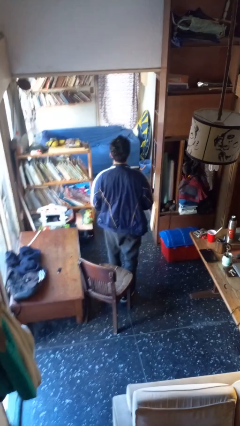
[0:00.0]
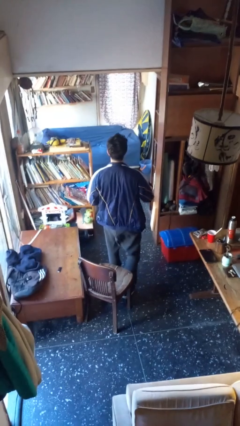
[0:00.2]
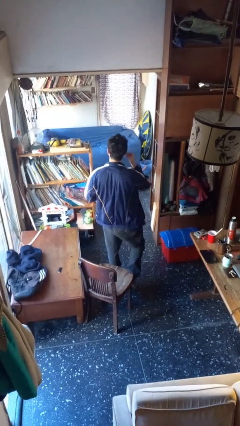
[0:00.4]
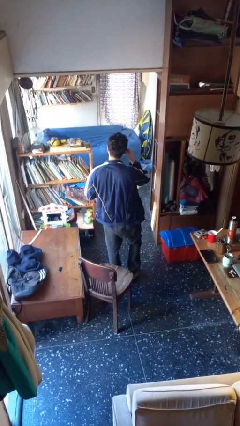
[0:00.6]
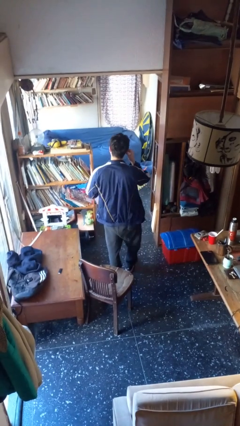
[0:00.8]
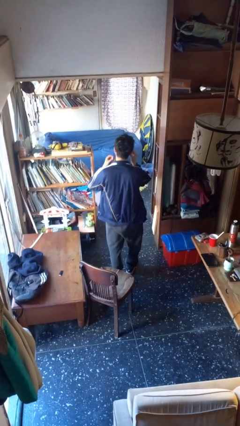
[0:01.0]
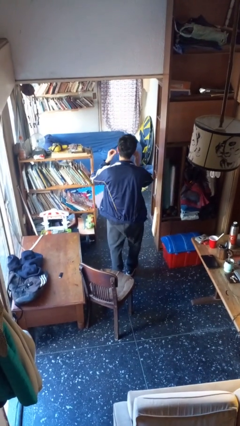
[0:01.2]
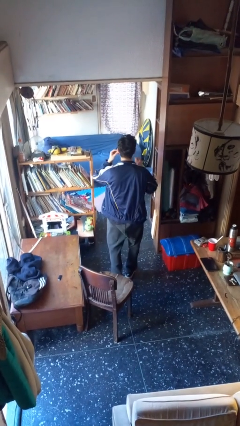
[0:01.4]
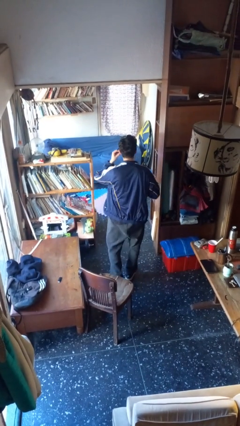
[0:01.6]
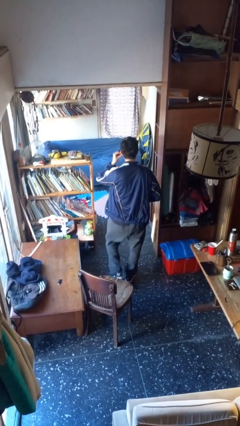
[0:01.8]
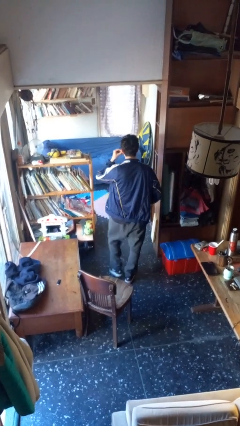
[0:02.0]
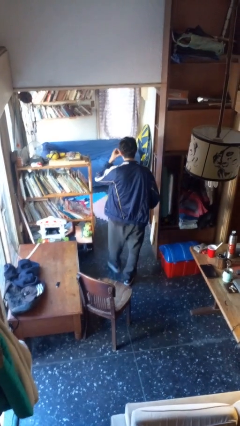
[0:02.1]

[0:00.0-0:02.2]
person puts on headphones

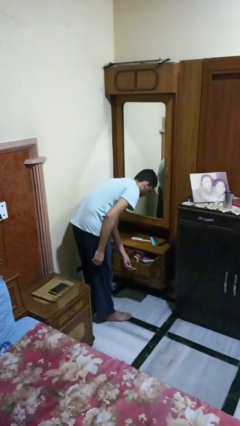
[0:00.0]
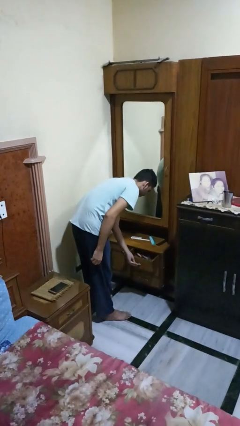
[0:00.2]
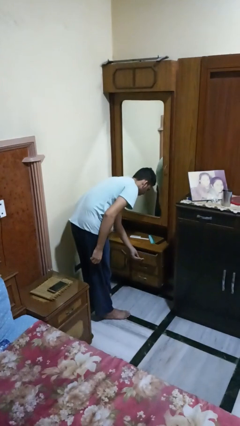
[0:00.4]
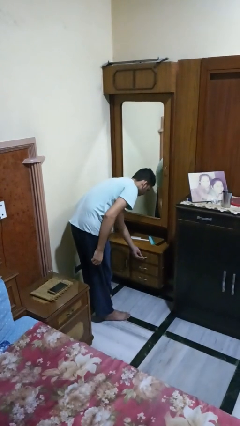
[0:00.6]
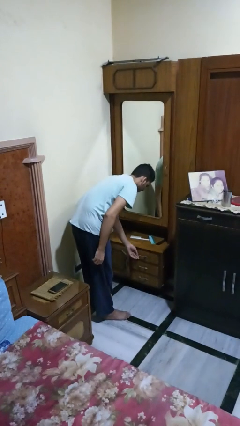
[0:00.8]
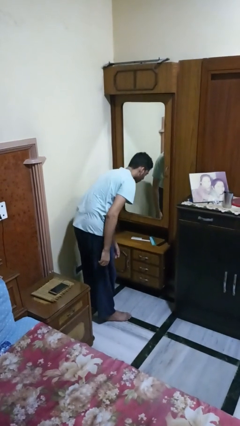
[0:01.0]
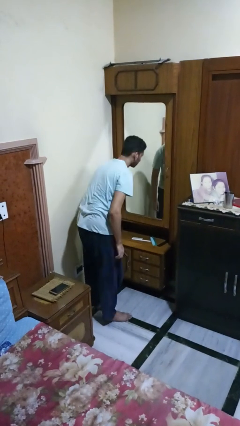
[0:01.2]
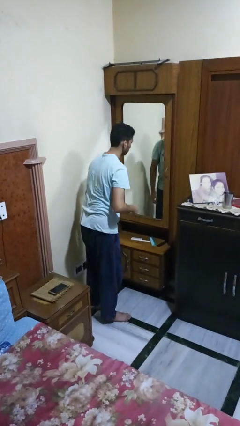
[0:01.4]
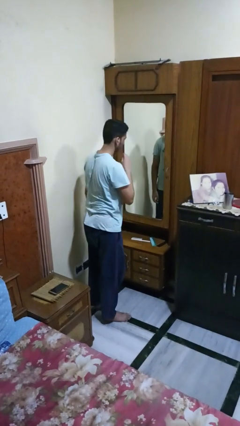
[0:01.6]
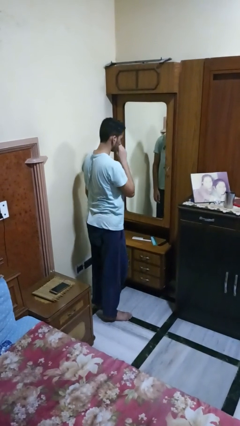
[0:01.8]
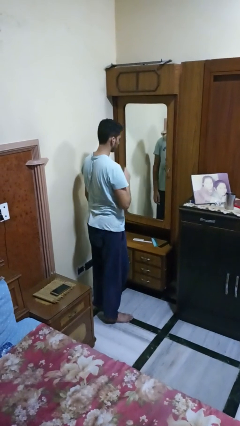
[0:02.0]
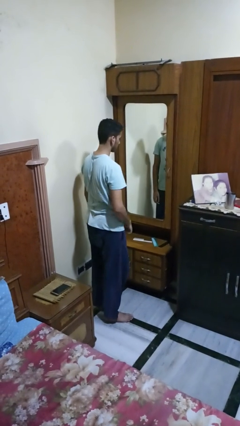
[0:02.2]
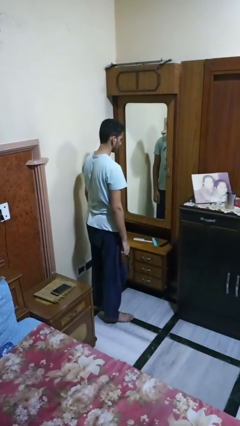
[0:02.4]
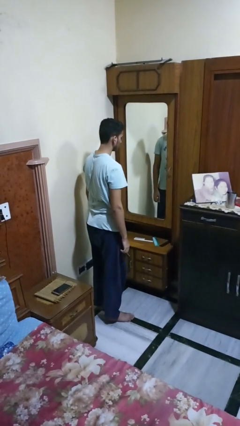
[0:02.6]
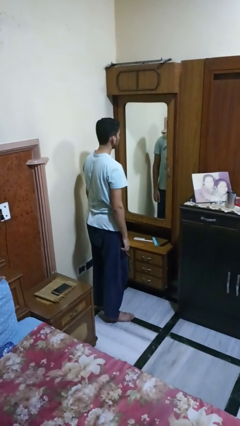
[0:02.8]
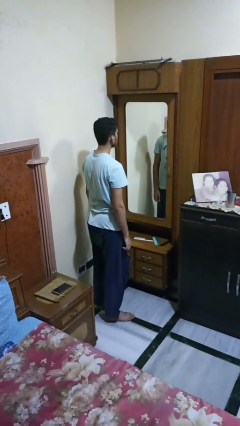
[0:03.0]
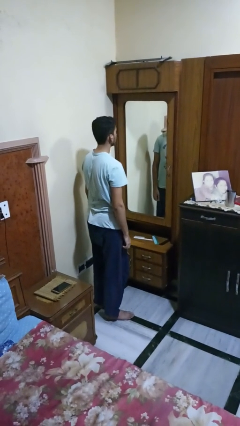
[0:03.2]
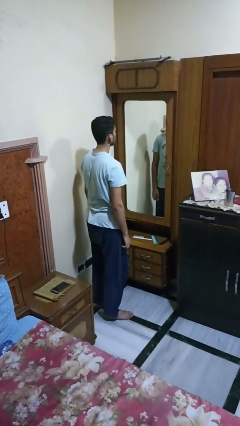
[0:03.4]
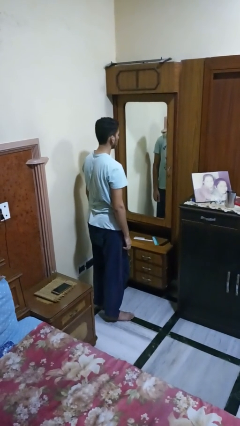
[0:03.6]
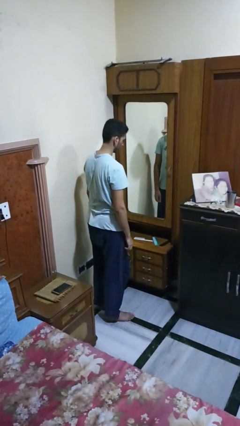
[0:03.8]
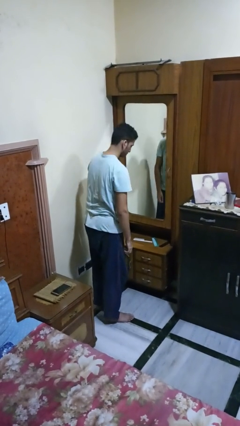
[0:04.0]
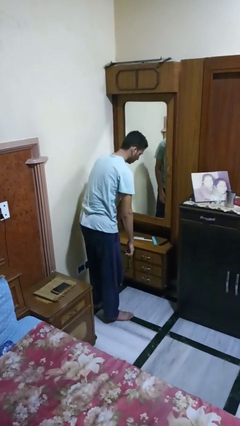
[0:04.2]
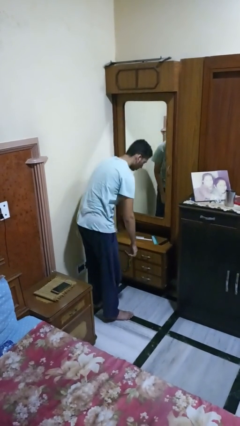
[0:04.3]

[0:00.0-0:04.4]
person closes dresser drawer

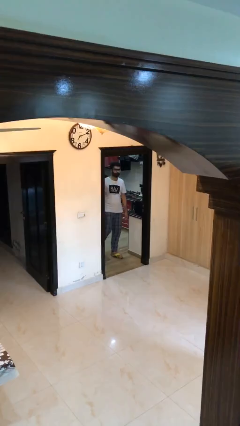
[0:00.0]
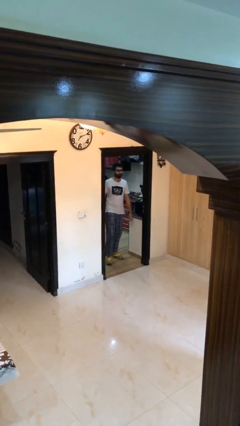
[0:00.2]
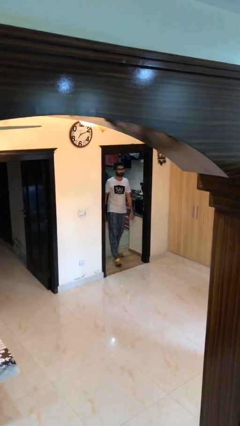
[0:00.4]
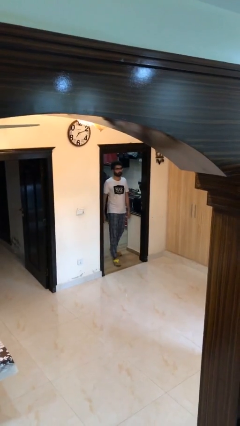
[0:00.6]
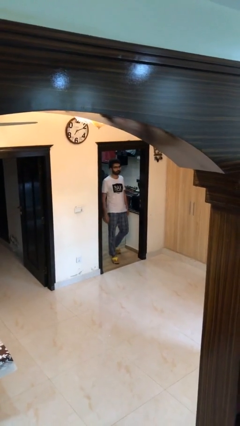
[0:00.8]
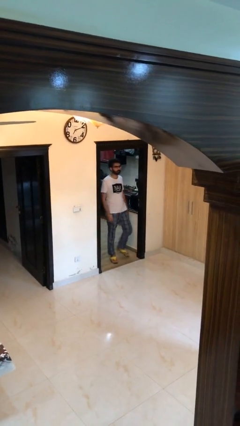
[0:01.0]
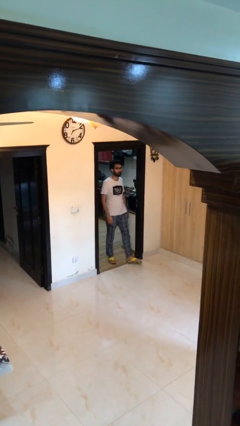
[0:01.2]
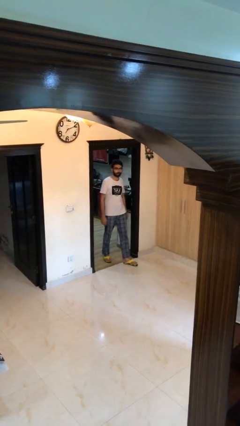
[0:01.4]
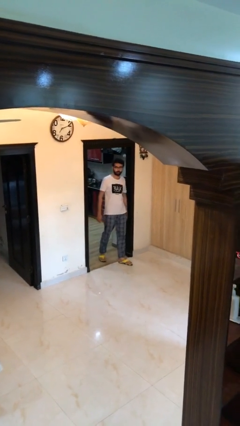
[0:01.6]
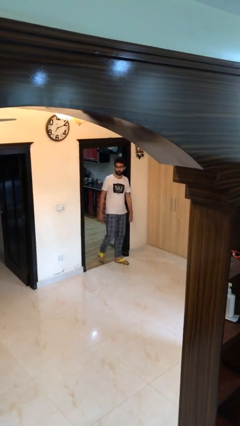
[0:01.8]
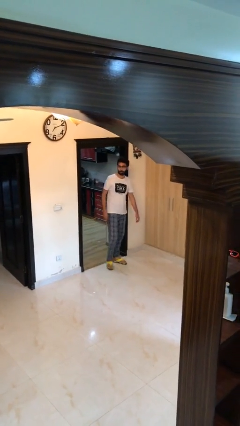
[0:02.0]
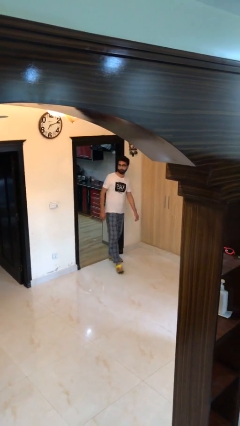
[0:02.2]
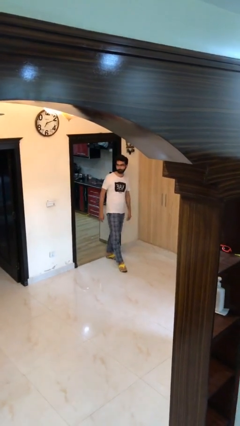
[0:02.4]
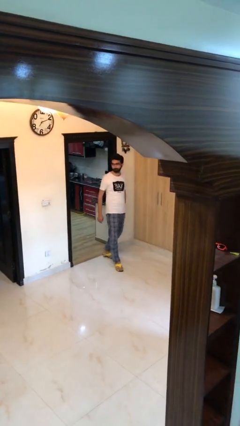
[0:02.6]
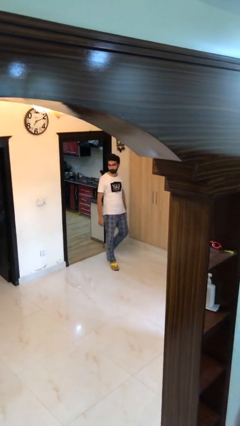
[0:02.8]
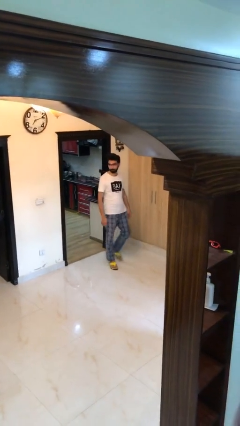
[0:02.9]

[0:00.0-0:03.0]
person enters scene through structure

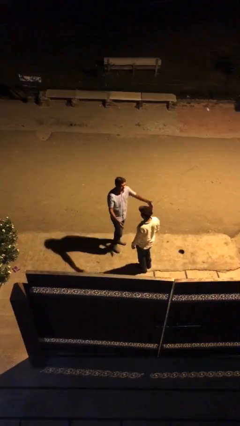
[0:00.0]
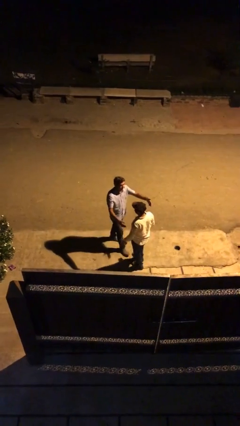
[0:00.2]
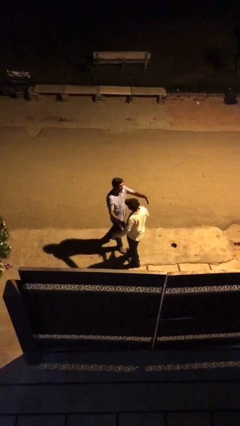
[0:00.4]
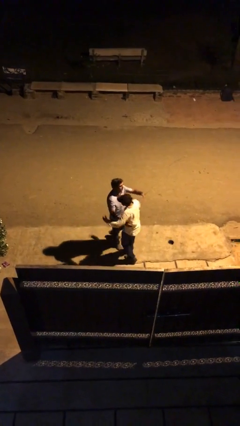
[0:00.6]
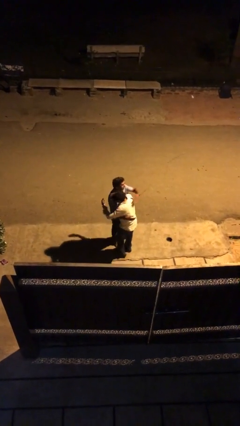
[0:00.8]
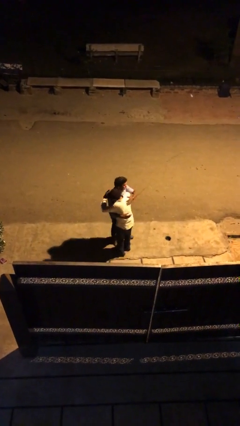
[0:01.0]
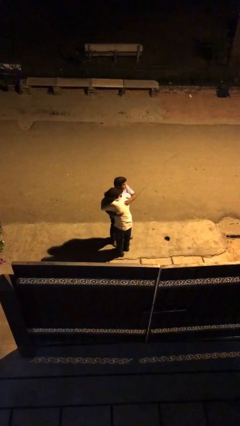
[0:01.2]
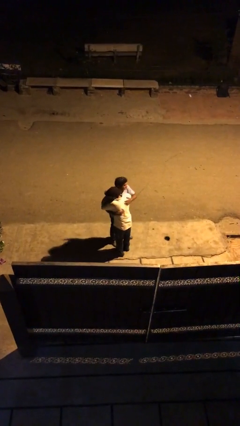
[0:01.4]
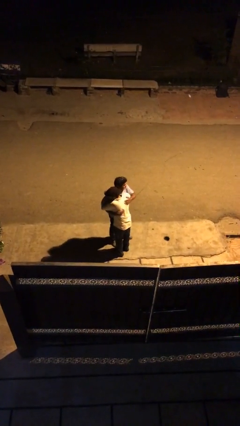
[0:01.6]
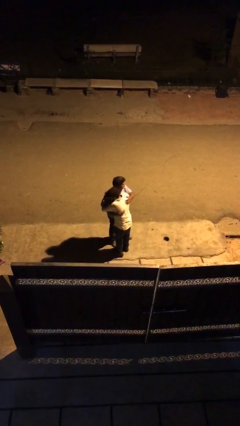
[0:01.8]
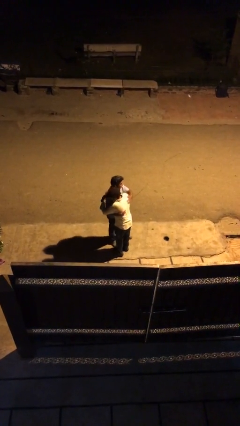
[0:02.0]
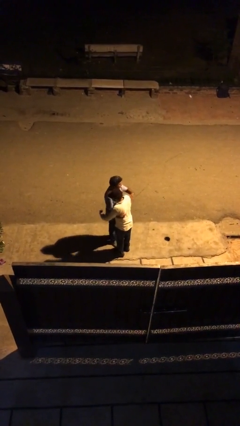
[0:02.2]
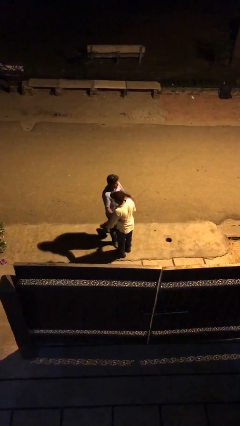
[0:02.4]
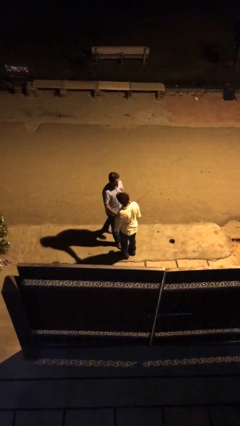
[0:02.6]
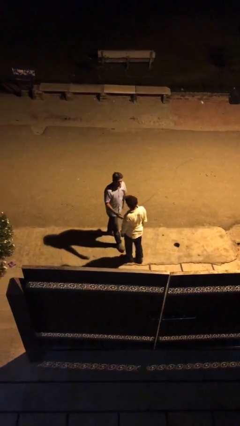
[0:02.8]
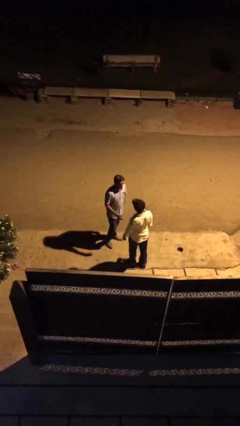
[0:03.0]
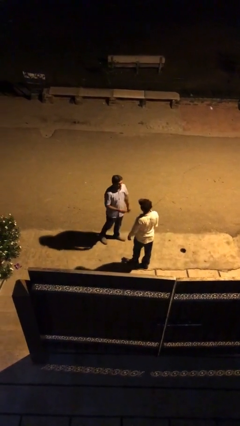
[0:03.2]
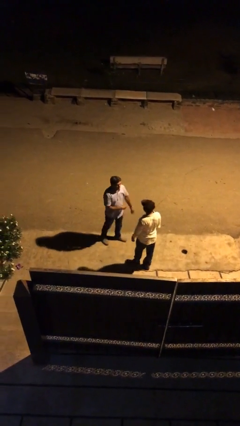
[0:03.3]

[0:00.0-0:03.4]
person embraces person

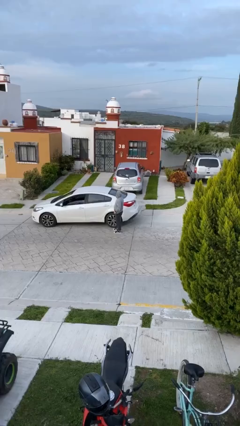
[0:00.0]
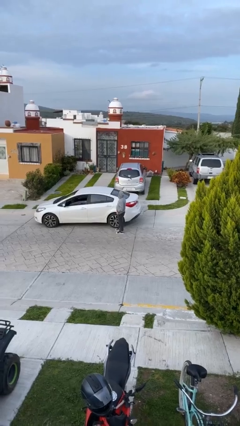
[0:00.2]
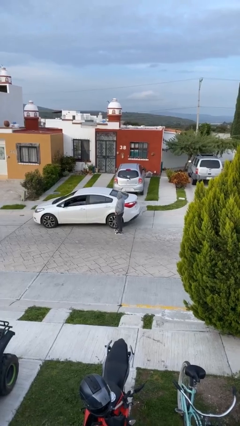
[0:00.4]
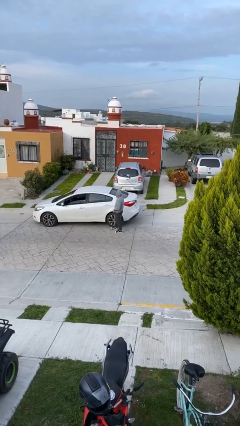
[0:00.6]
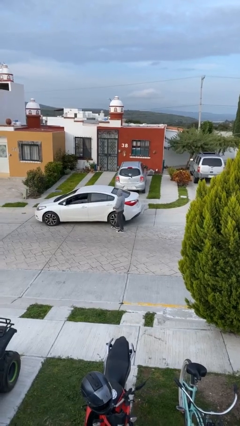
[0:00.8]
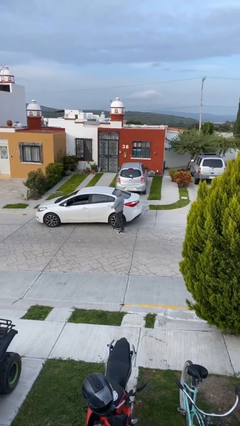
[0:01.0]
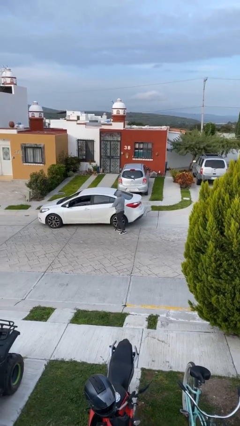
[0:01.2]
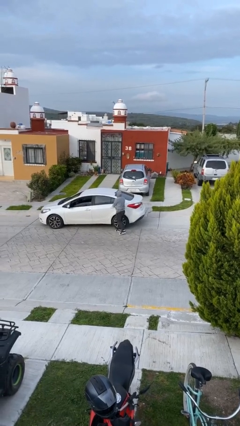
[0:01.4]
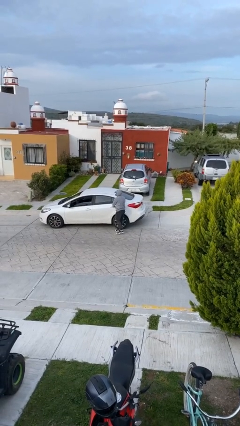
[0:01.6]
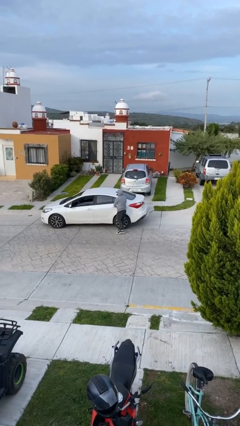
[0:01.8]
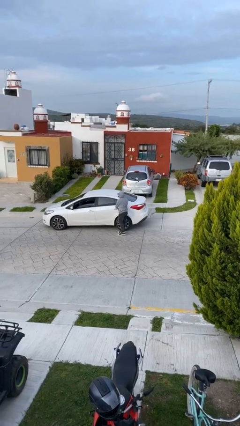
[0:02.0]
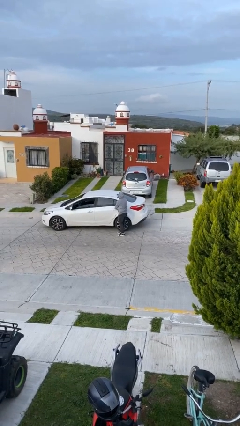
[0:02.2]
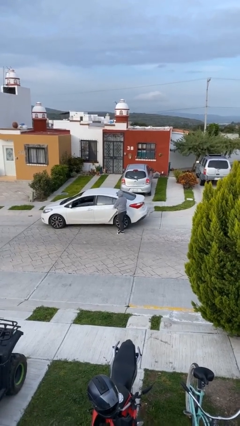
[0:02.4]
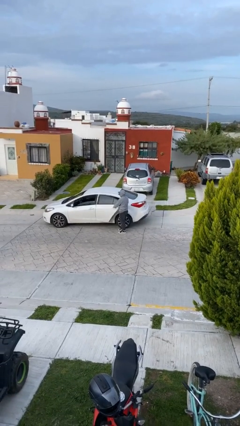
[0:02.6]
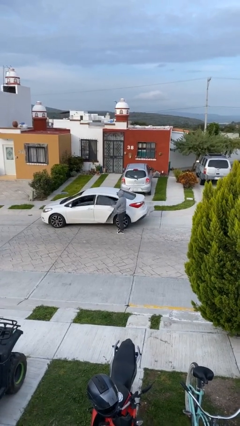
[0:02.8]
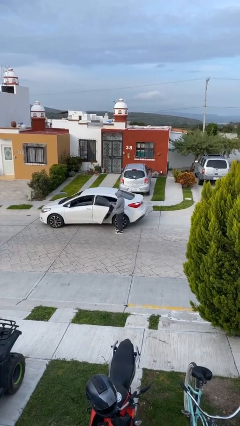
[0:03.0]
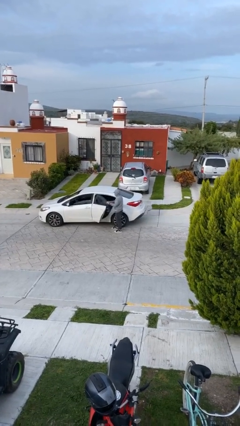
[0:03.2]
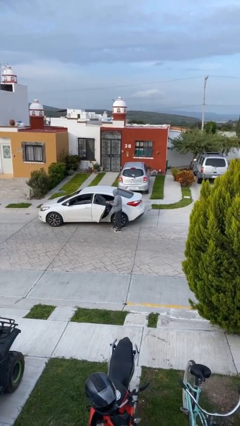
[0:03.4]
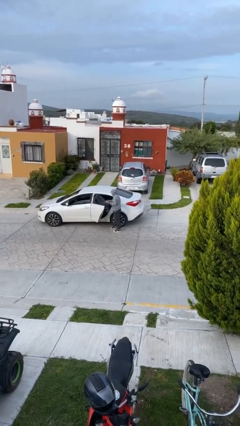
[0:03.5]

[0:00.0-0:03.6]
person opens car door

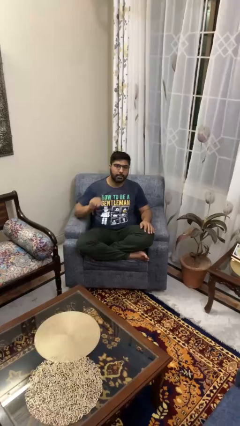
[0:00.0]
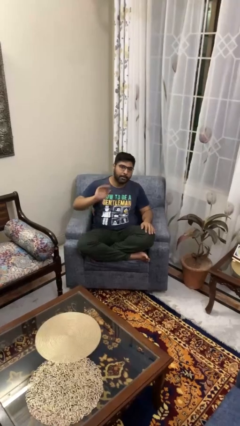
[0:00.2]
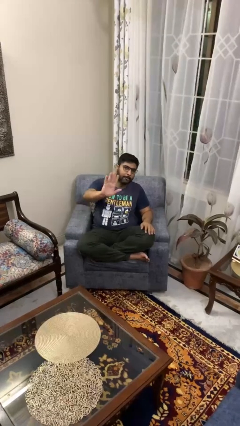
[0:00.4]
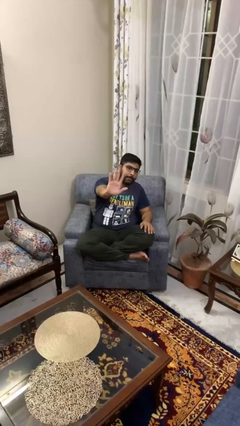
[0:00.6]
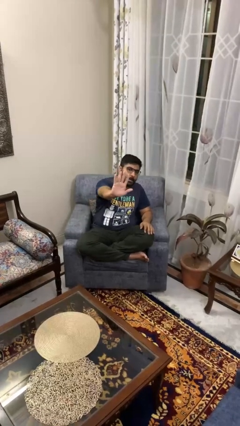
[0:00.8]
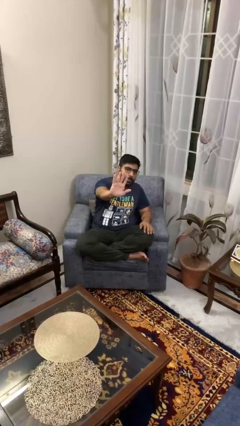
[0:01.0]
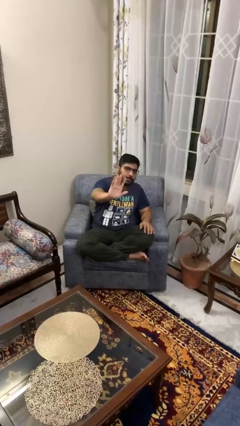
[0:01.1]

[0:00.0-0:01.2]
person gestures number five
